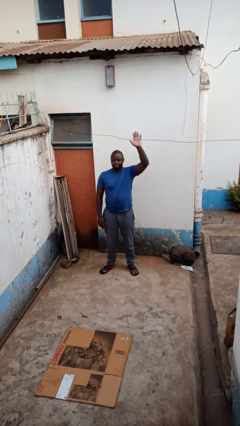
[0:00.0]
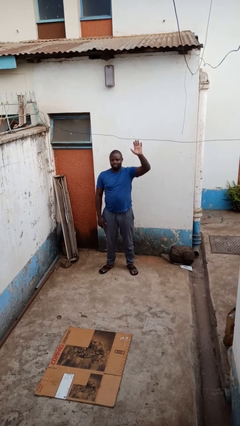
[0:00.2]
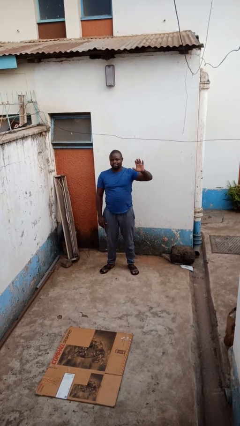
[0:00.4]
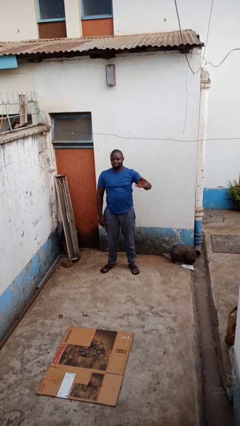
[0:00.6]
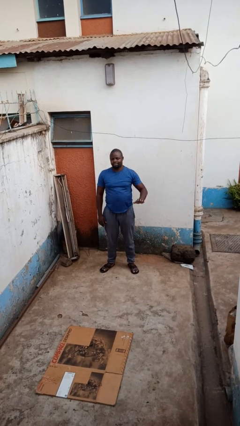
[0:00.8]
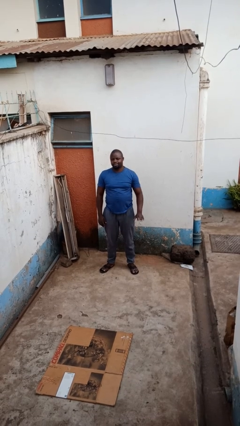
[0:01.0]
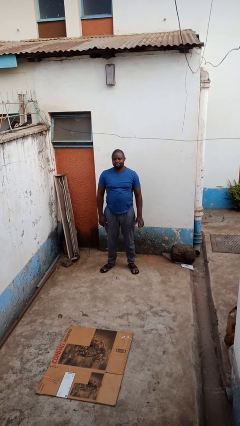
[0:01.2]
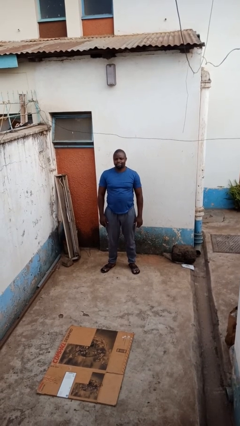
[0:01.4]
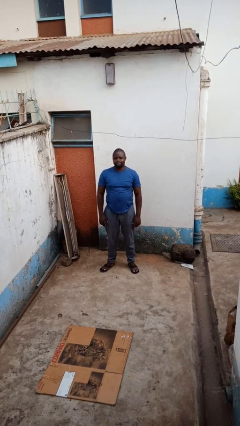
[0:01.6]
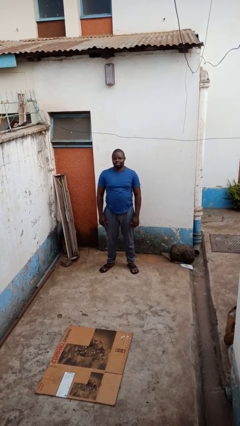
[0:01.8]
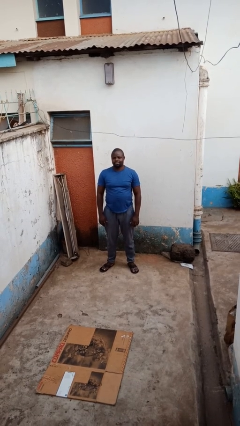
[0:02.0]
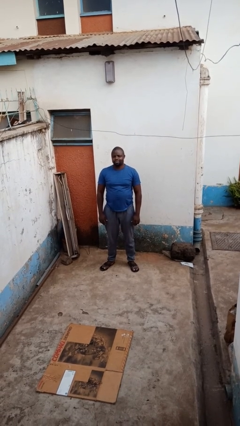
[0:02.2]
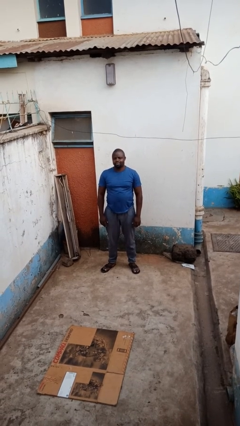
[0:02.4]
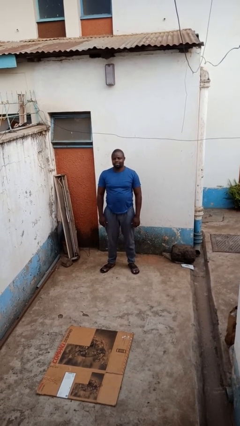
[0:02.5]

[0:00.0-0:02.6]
person gestures lower hand

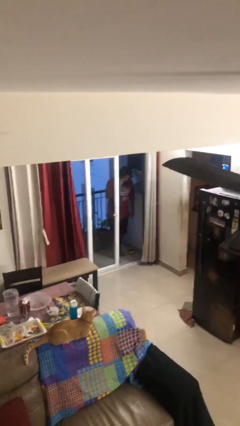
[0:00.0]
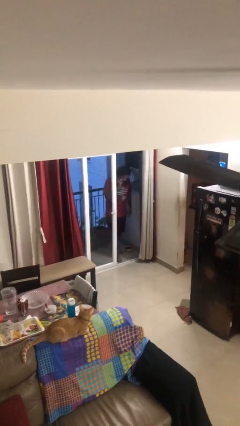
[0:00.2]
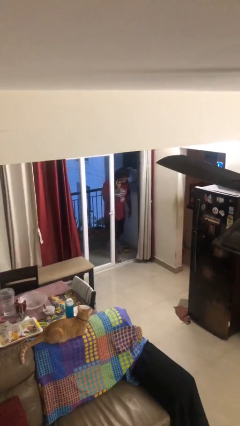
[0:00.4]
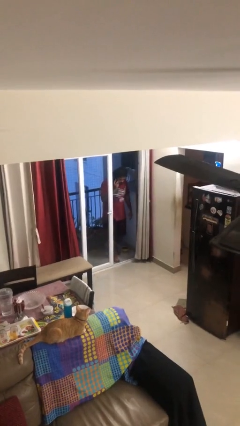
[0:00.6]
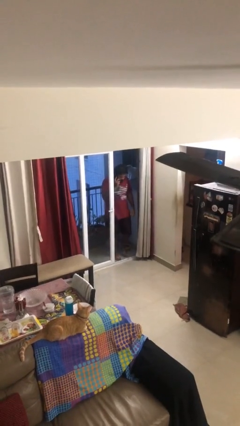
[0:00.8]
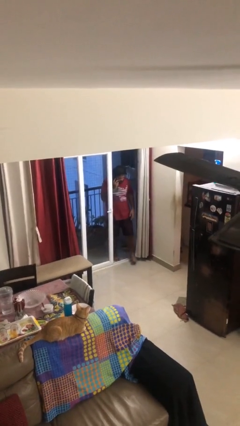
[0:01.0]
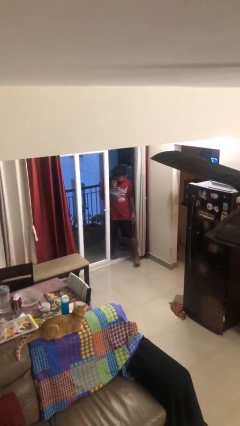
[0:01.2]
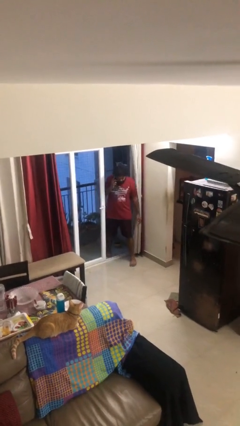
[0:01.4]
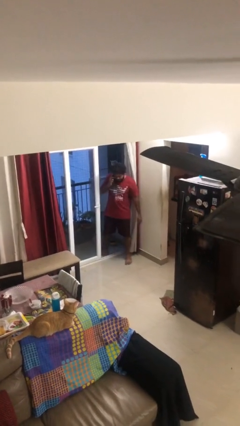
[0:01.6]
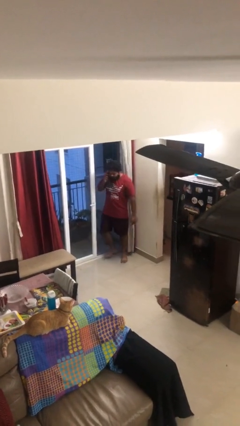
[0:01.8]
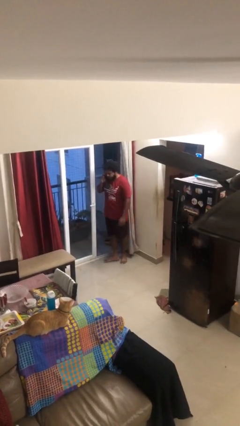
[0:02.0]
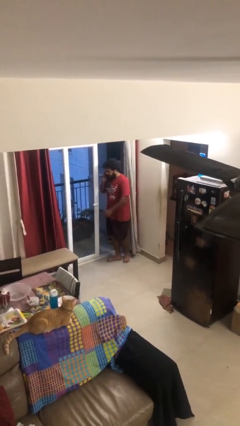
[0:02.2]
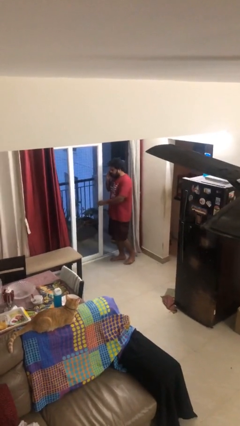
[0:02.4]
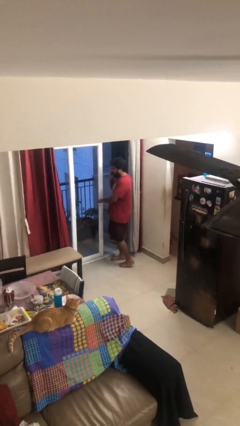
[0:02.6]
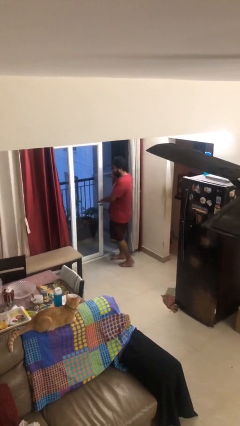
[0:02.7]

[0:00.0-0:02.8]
person enters scene through structure

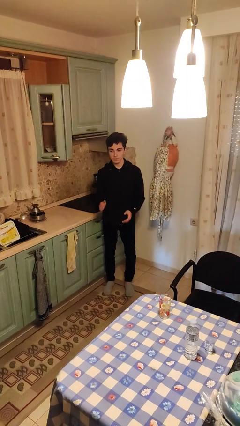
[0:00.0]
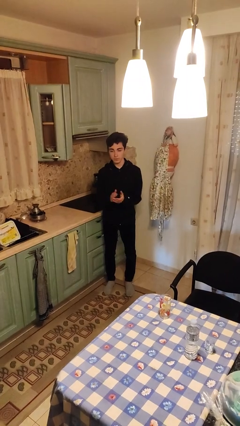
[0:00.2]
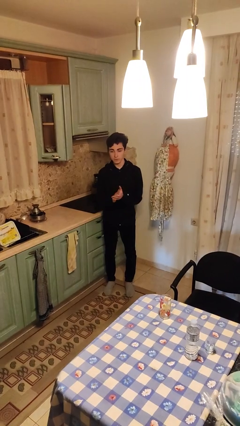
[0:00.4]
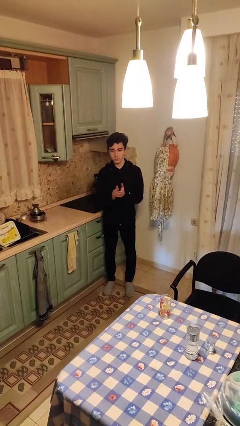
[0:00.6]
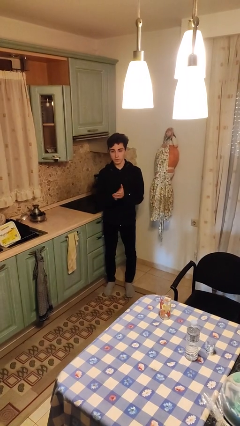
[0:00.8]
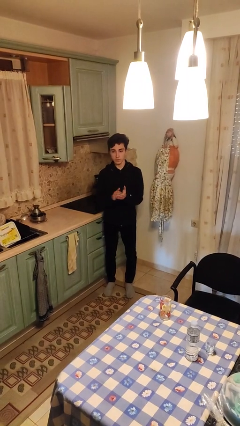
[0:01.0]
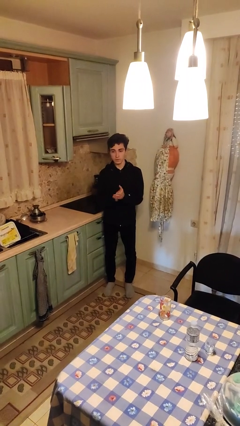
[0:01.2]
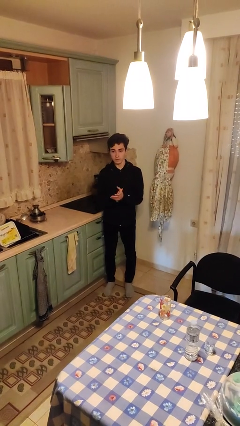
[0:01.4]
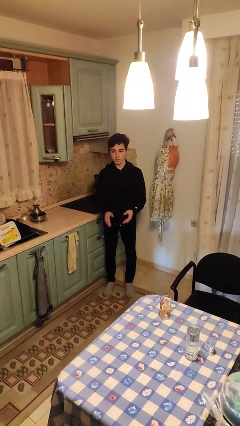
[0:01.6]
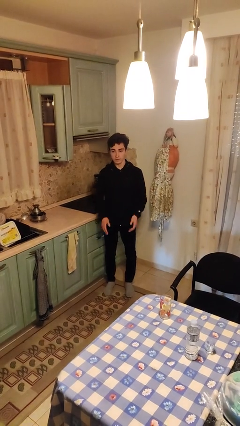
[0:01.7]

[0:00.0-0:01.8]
person claps hands

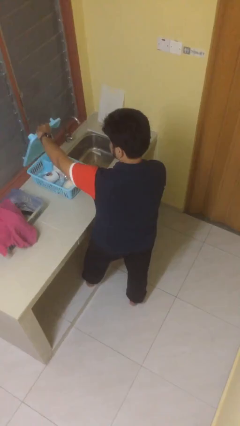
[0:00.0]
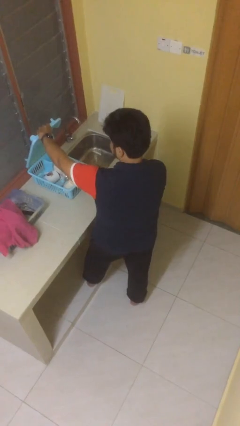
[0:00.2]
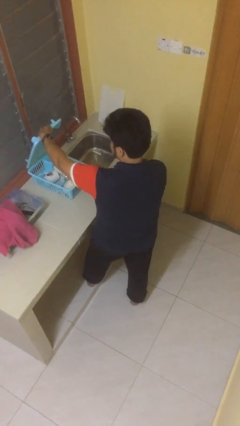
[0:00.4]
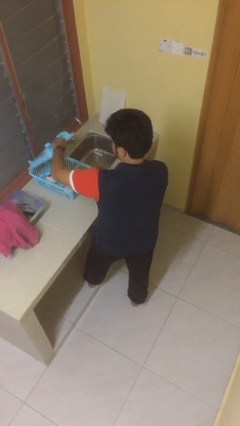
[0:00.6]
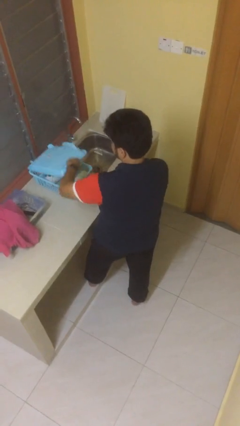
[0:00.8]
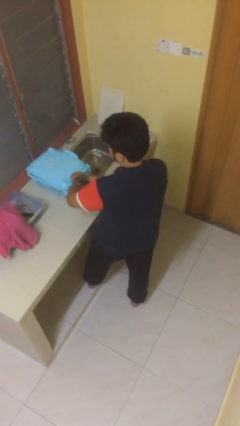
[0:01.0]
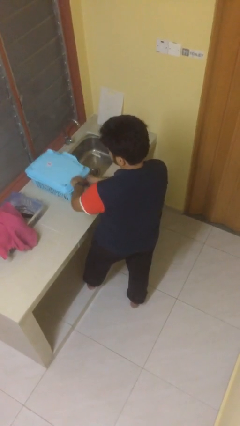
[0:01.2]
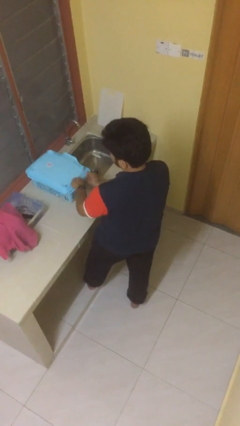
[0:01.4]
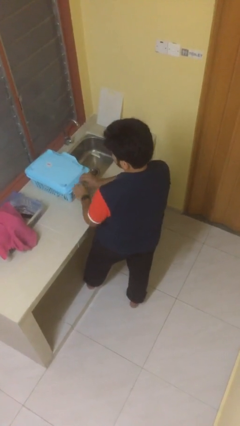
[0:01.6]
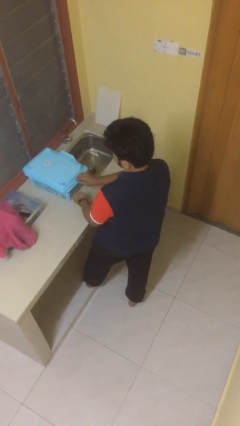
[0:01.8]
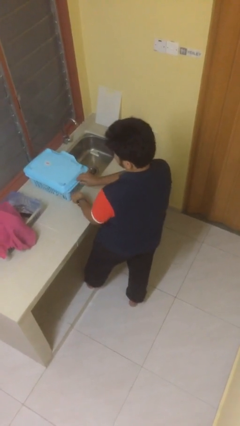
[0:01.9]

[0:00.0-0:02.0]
person closes dishwasher

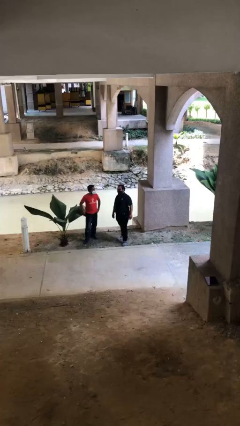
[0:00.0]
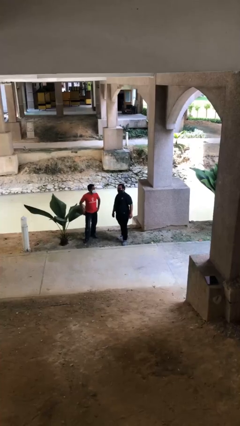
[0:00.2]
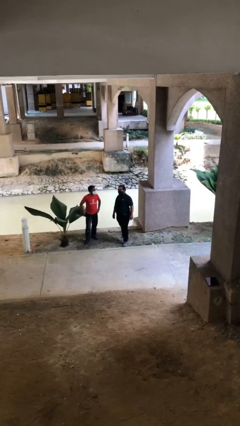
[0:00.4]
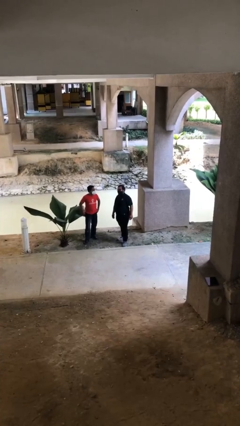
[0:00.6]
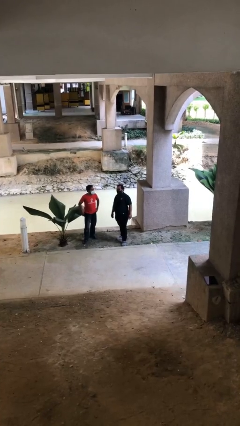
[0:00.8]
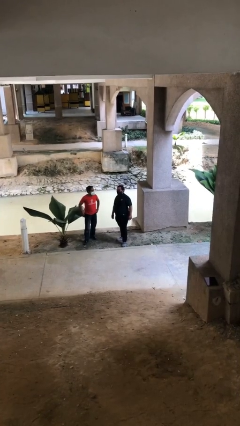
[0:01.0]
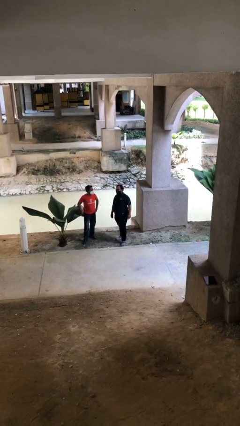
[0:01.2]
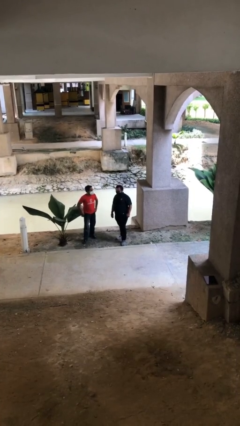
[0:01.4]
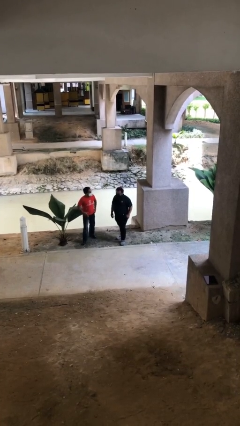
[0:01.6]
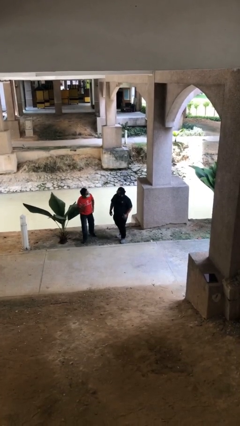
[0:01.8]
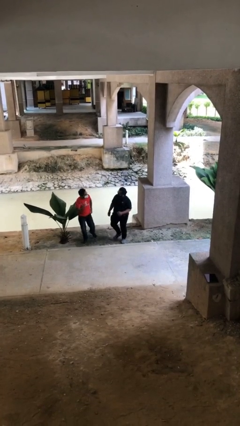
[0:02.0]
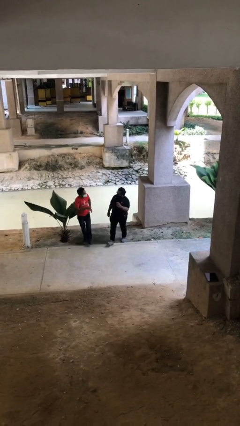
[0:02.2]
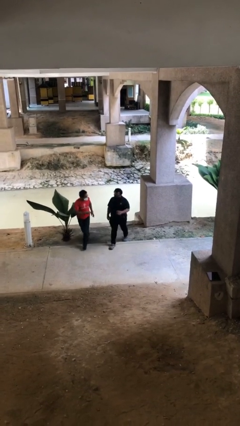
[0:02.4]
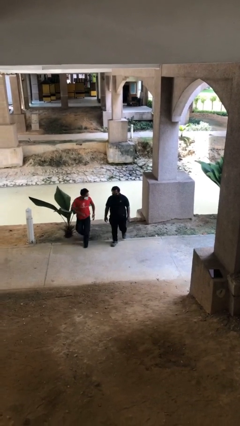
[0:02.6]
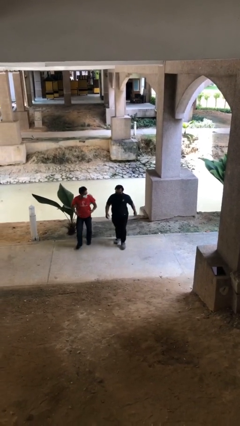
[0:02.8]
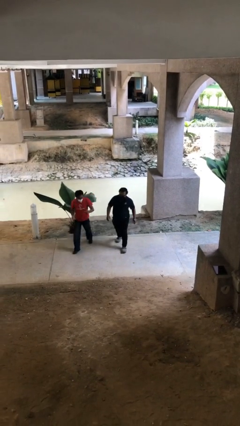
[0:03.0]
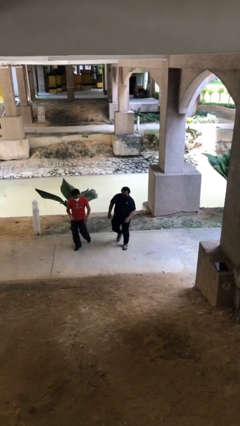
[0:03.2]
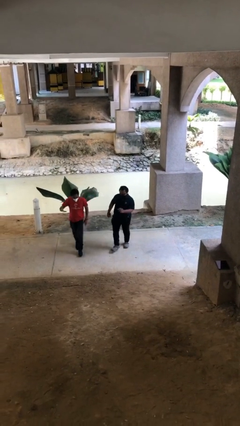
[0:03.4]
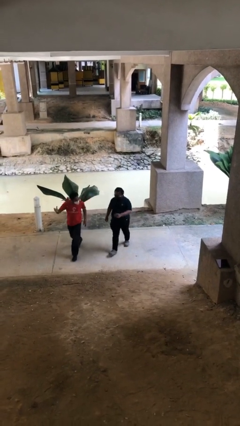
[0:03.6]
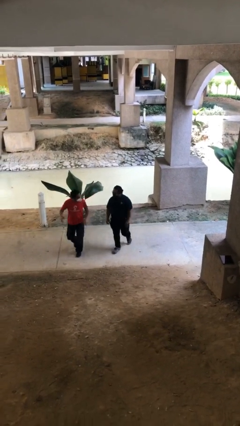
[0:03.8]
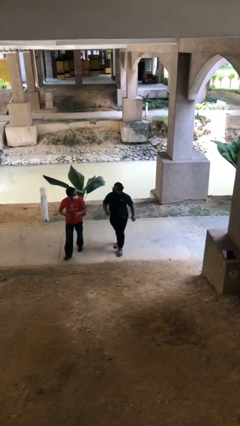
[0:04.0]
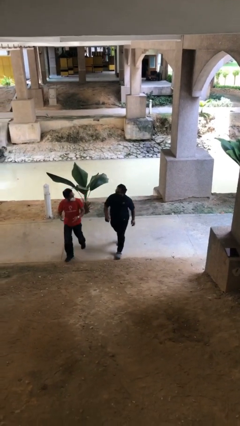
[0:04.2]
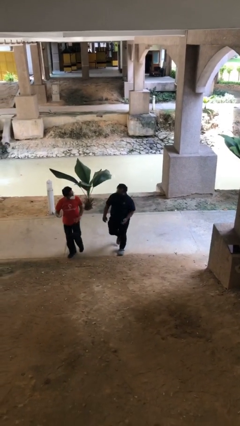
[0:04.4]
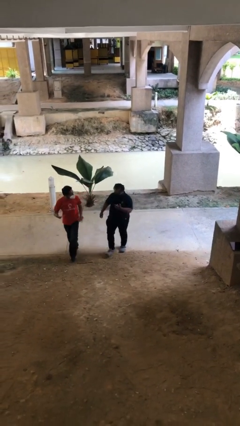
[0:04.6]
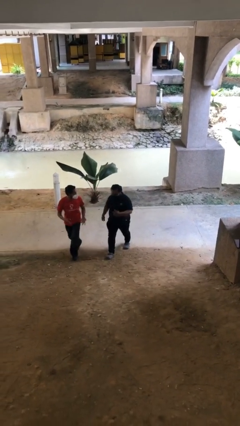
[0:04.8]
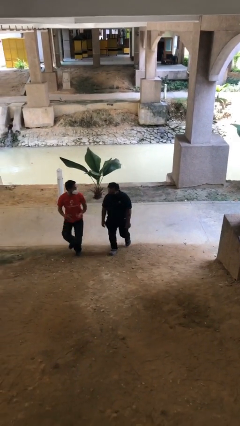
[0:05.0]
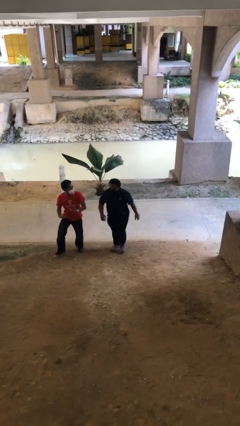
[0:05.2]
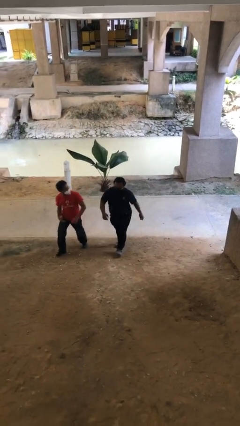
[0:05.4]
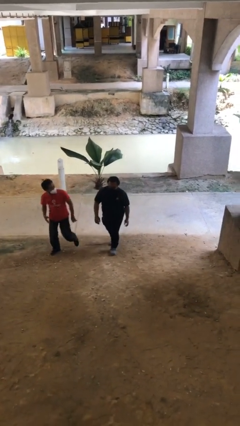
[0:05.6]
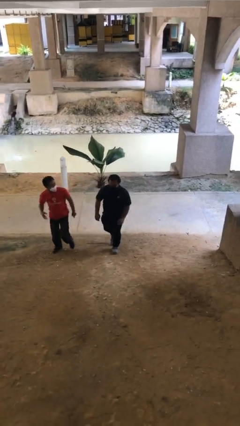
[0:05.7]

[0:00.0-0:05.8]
person talks to person

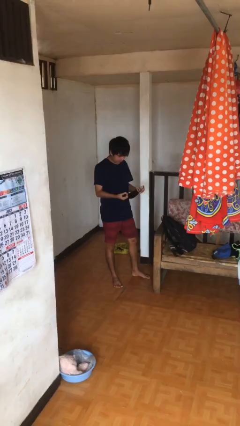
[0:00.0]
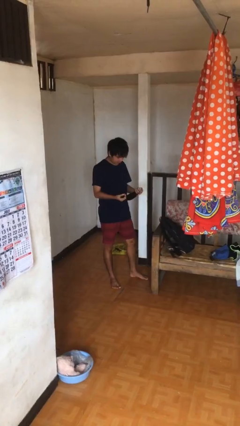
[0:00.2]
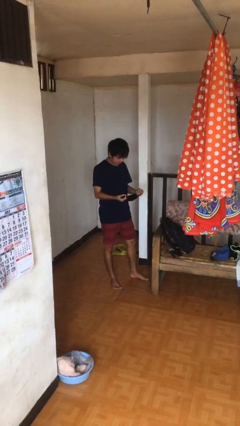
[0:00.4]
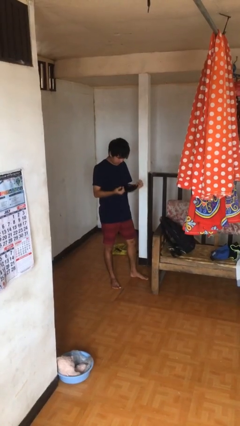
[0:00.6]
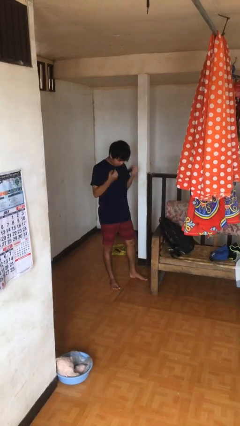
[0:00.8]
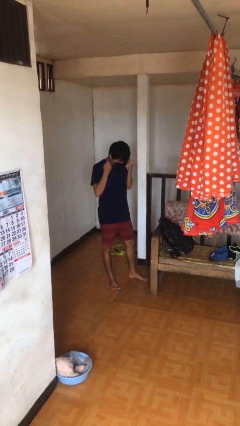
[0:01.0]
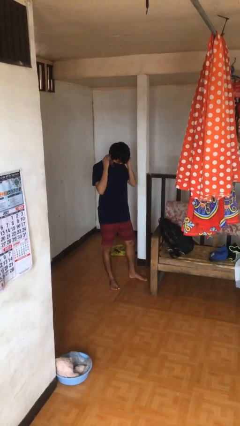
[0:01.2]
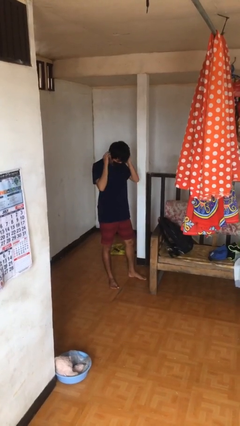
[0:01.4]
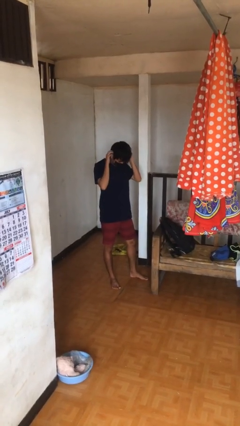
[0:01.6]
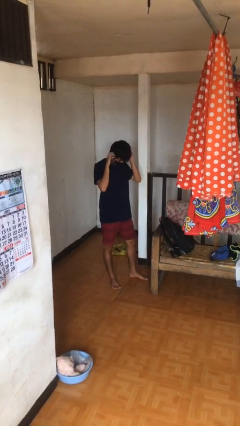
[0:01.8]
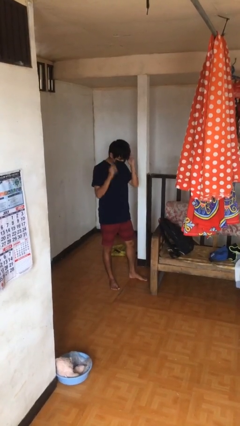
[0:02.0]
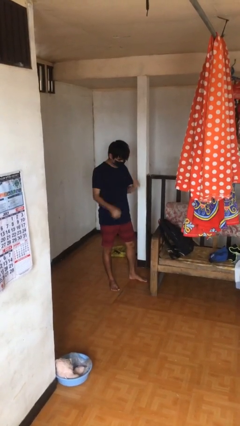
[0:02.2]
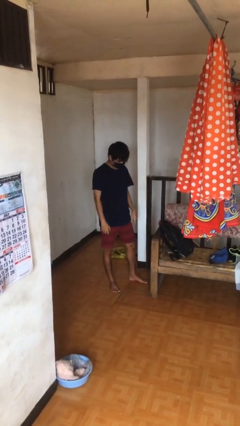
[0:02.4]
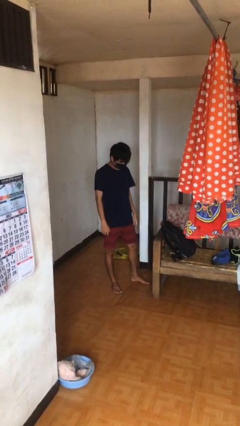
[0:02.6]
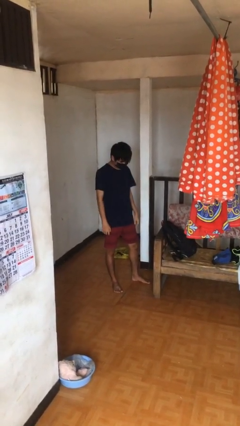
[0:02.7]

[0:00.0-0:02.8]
person puts on facemask
